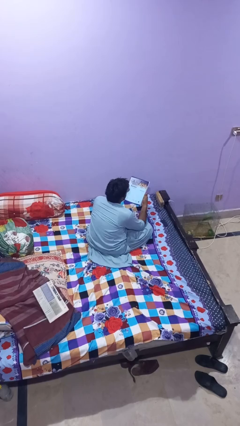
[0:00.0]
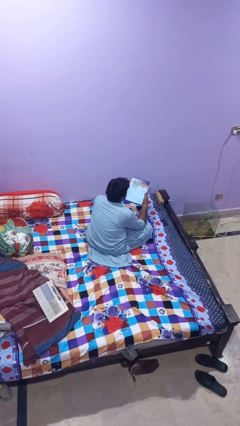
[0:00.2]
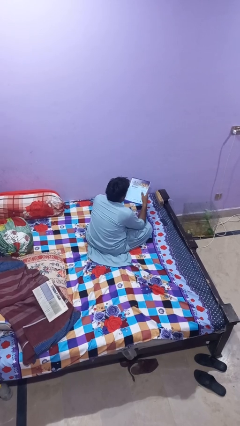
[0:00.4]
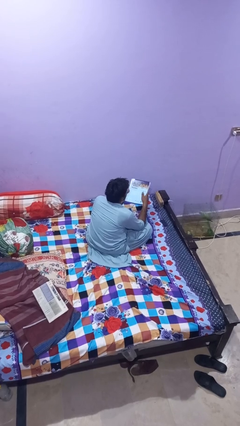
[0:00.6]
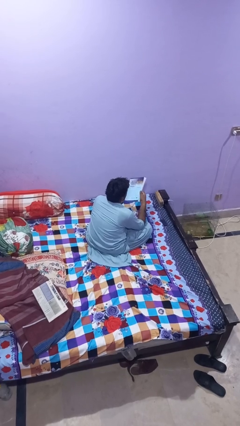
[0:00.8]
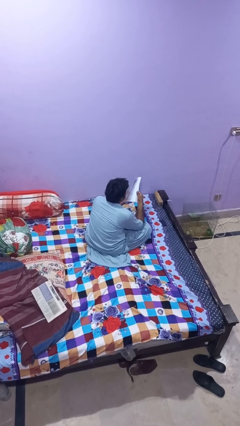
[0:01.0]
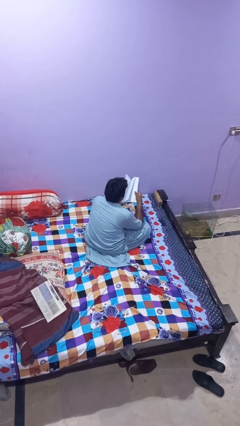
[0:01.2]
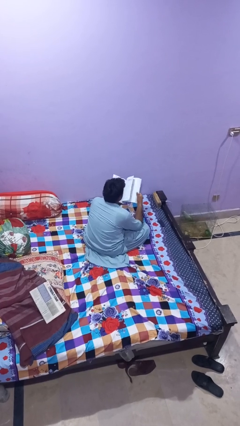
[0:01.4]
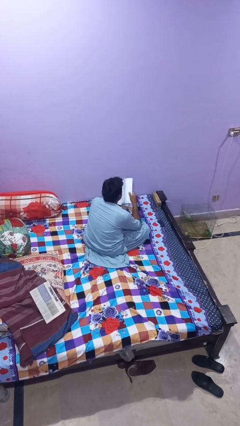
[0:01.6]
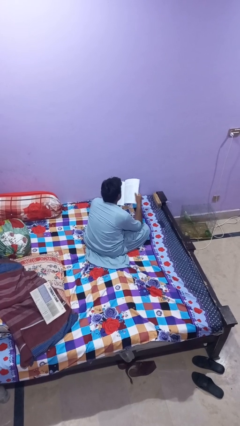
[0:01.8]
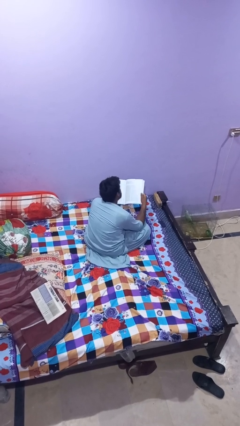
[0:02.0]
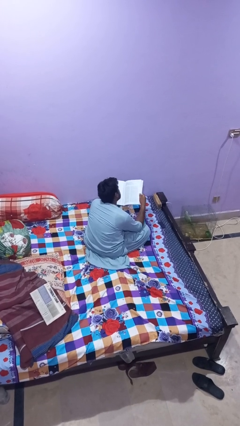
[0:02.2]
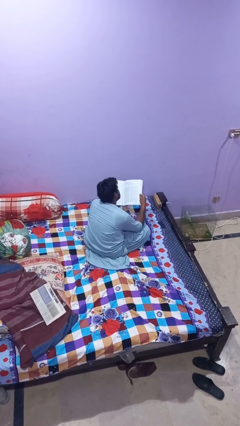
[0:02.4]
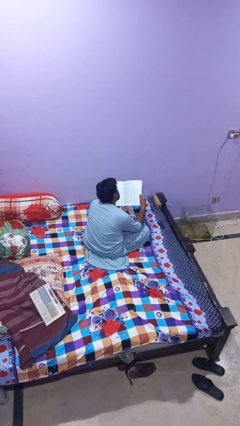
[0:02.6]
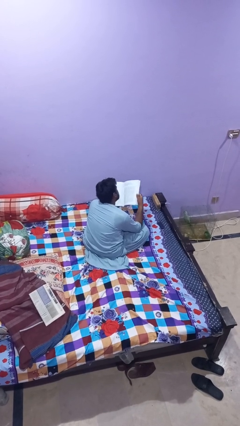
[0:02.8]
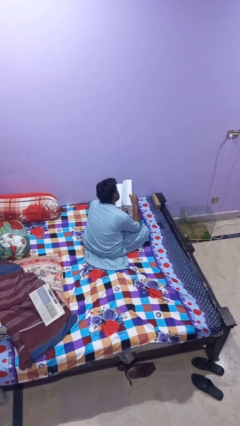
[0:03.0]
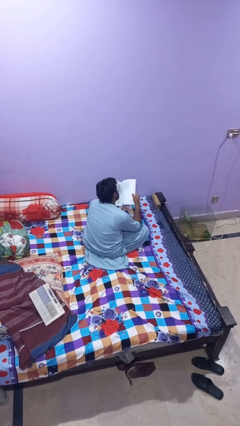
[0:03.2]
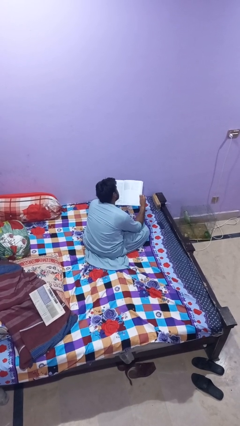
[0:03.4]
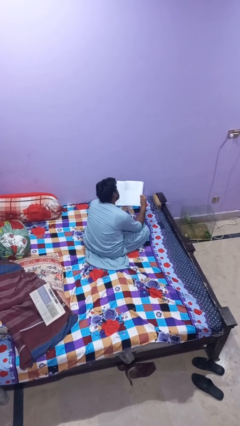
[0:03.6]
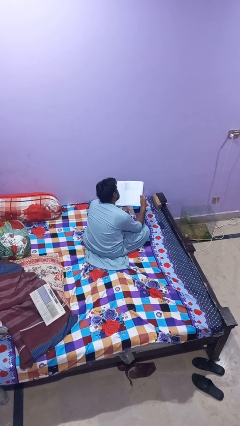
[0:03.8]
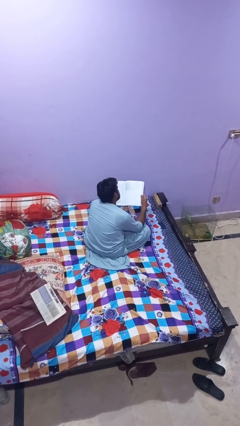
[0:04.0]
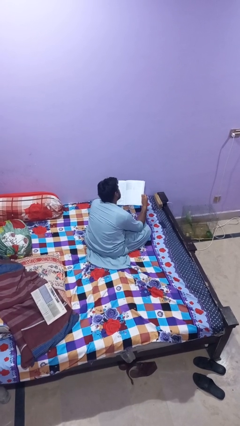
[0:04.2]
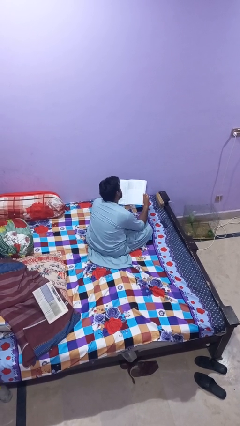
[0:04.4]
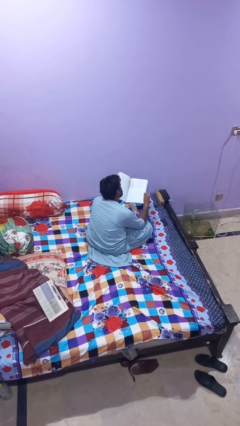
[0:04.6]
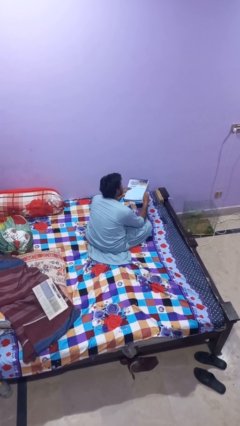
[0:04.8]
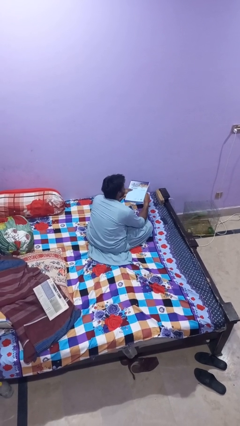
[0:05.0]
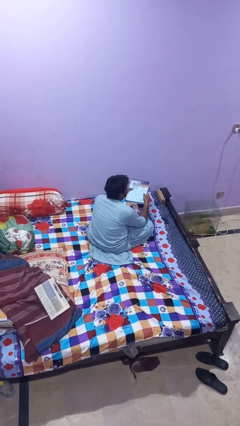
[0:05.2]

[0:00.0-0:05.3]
person reads magazine

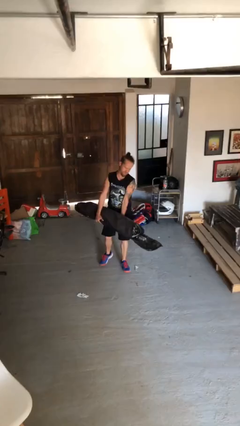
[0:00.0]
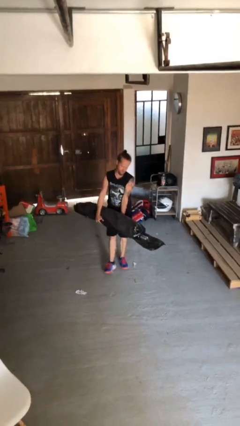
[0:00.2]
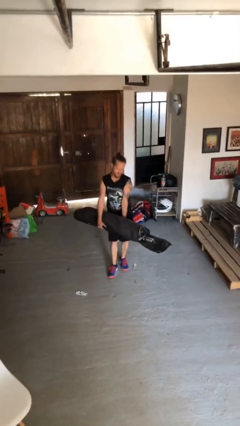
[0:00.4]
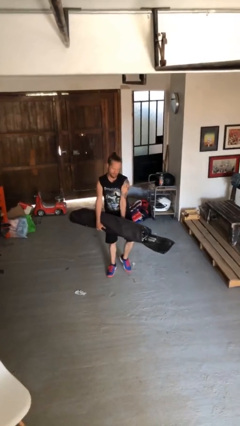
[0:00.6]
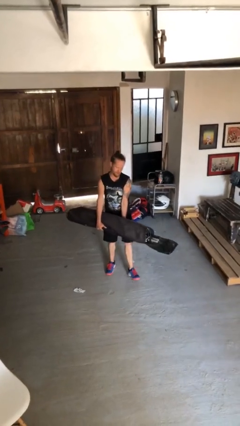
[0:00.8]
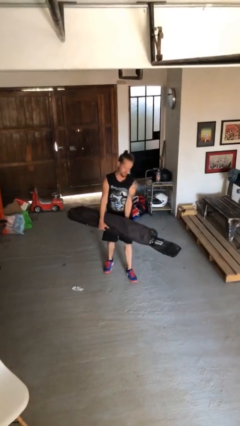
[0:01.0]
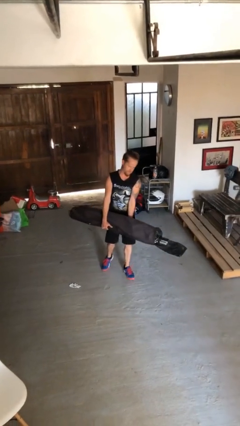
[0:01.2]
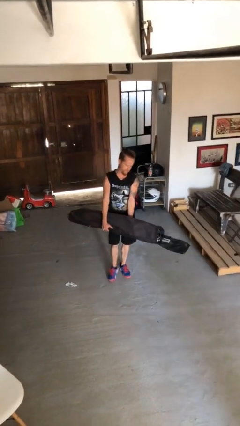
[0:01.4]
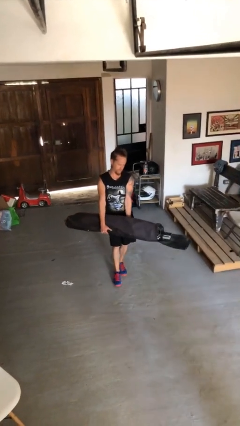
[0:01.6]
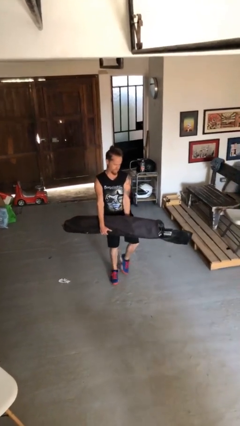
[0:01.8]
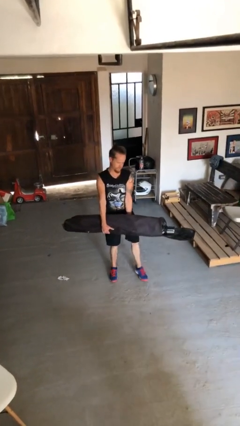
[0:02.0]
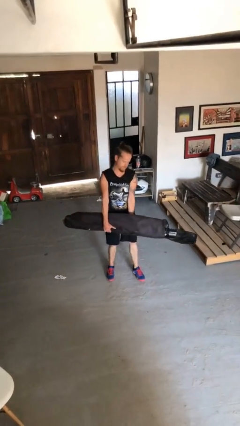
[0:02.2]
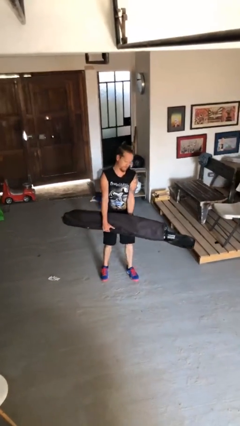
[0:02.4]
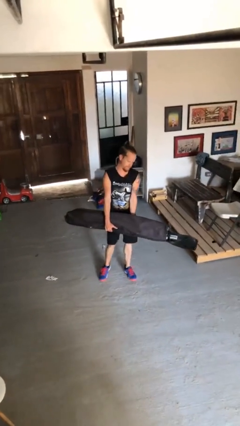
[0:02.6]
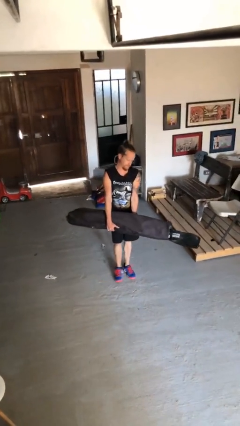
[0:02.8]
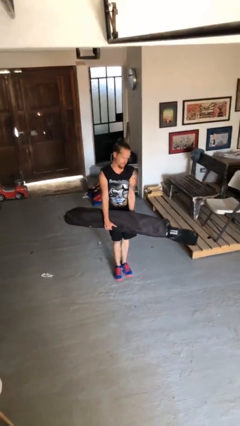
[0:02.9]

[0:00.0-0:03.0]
person carries heavy object

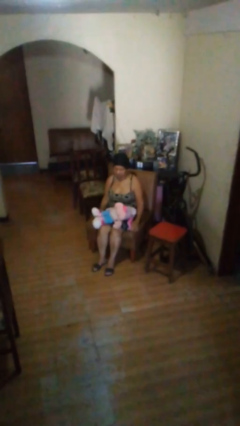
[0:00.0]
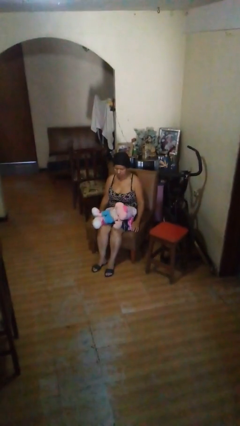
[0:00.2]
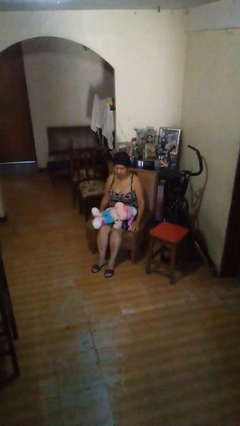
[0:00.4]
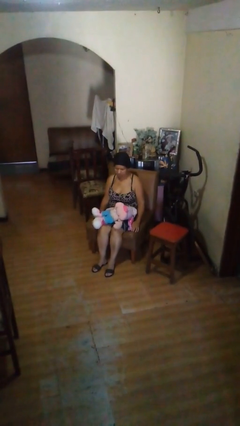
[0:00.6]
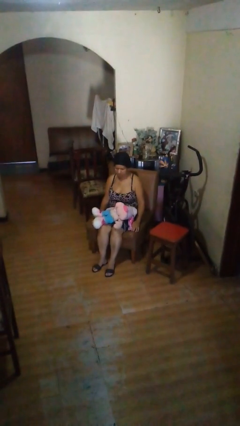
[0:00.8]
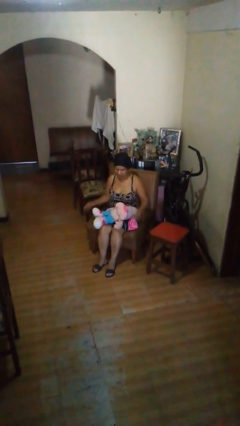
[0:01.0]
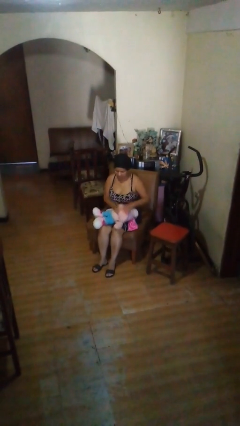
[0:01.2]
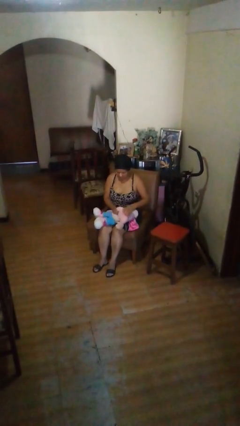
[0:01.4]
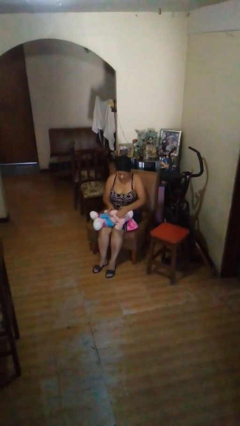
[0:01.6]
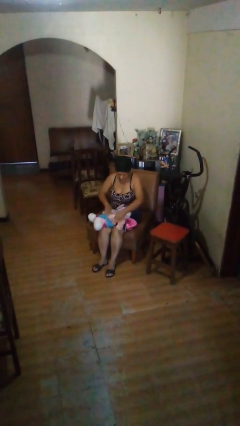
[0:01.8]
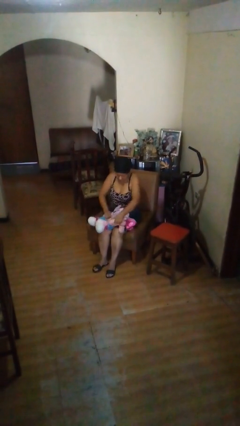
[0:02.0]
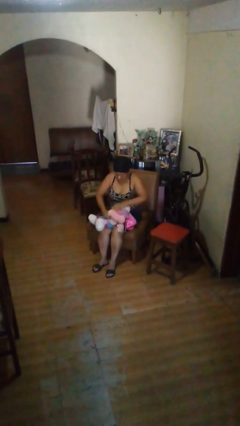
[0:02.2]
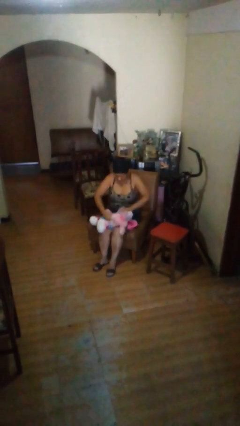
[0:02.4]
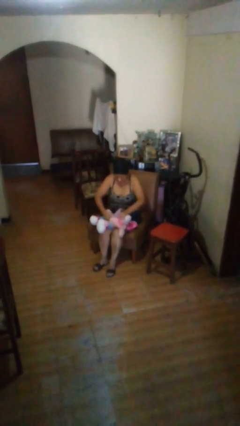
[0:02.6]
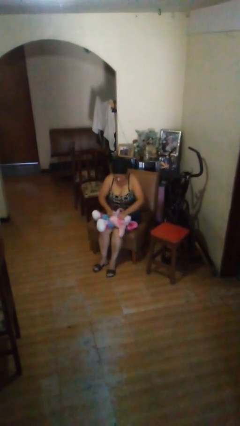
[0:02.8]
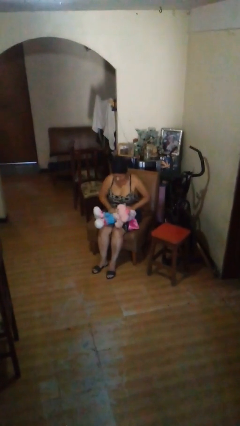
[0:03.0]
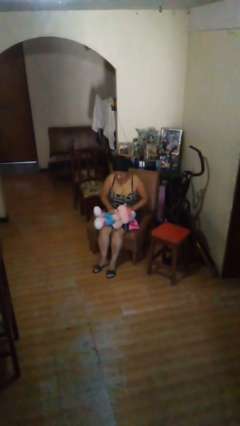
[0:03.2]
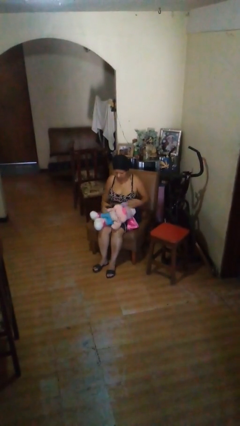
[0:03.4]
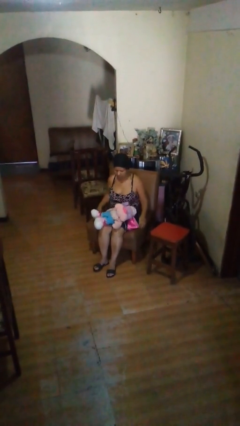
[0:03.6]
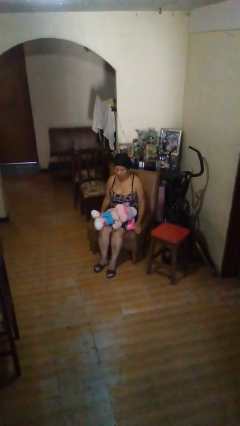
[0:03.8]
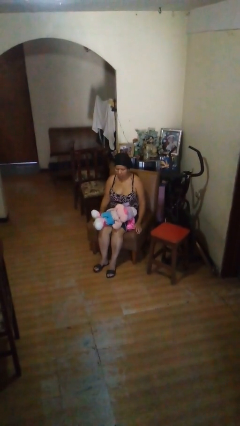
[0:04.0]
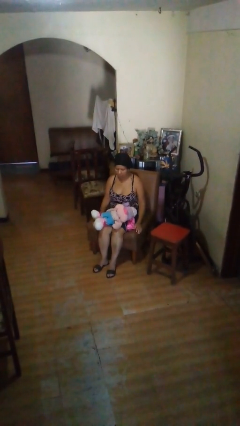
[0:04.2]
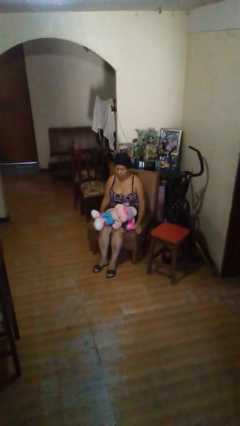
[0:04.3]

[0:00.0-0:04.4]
person squeezes object

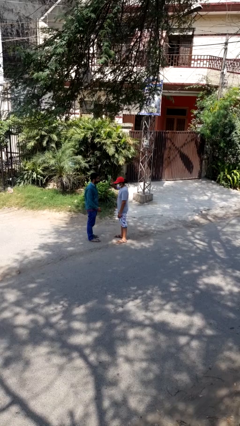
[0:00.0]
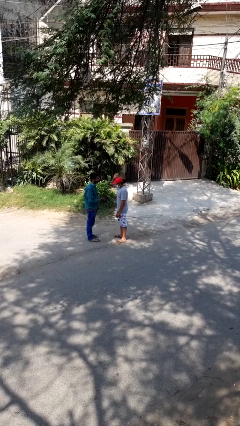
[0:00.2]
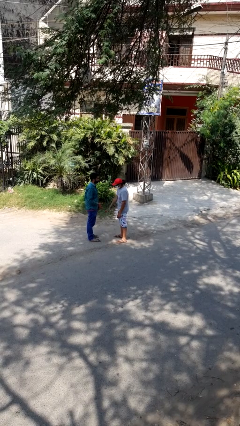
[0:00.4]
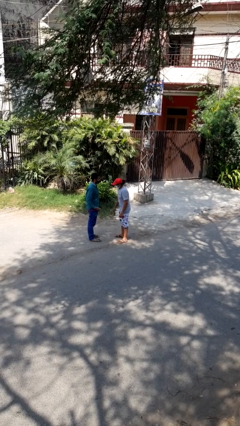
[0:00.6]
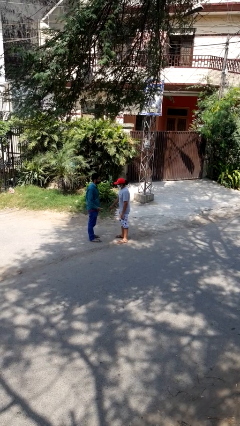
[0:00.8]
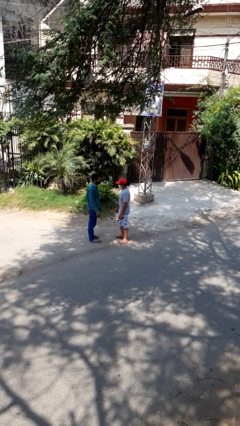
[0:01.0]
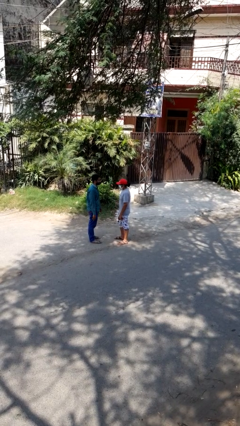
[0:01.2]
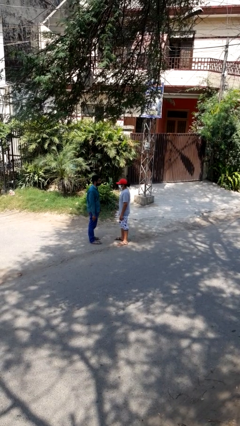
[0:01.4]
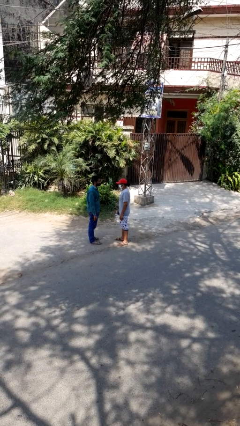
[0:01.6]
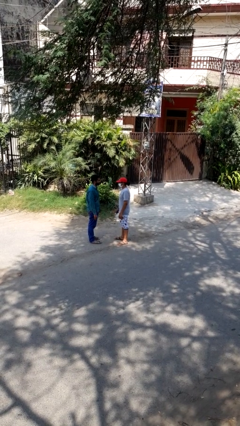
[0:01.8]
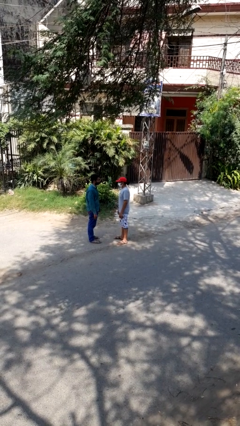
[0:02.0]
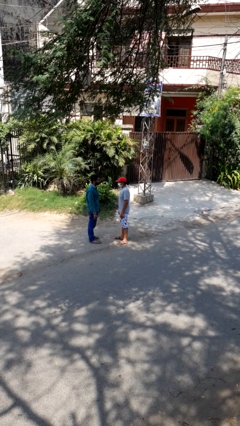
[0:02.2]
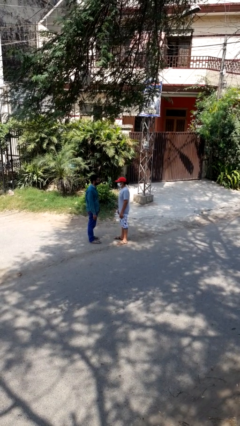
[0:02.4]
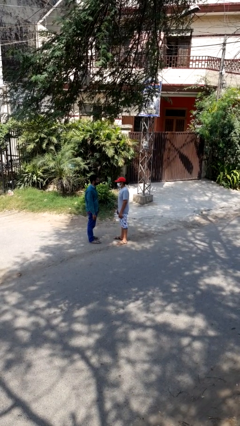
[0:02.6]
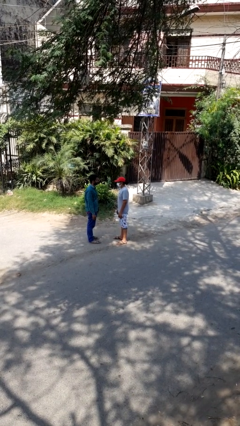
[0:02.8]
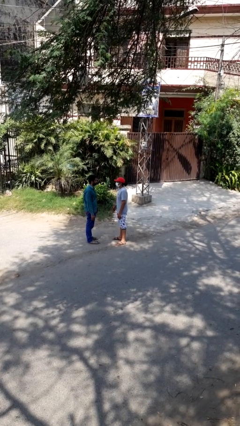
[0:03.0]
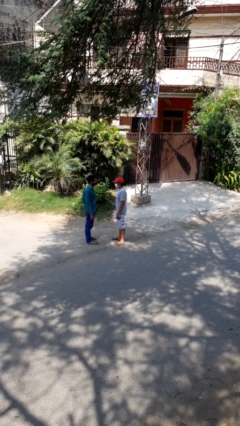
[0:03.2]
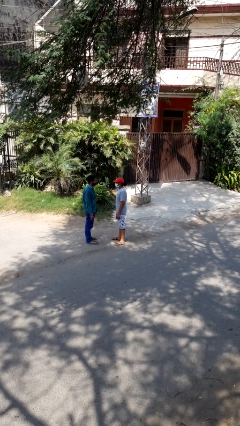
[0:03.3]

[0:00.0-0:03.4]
person highfives hand

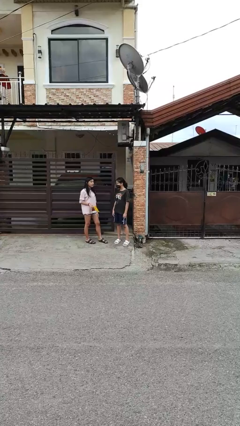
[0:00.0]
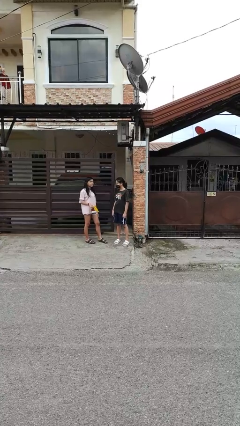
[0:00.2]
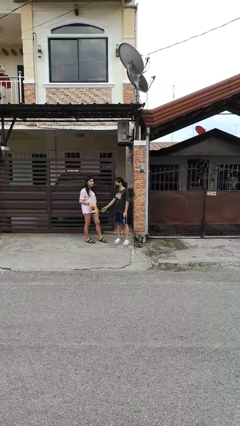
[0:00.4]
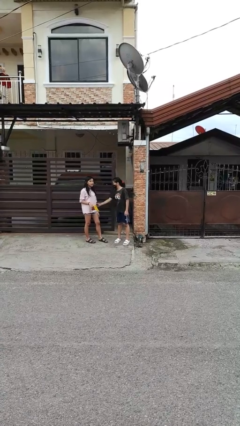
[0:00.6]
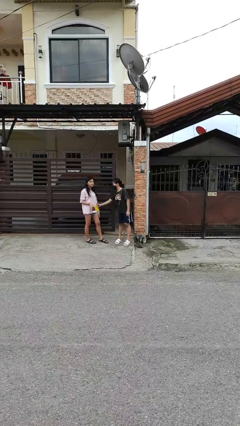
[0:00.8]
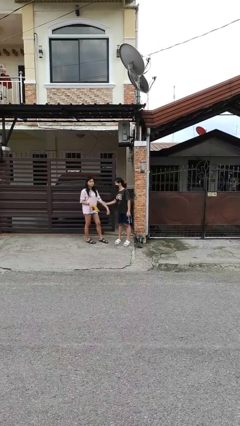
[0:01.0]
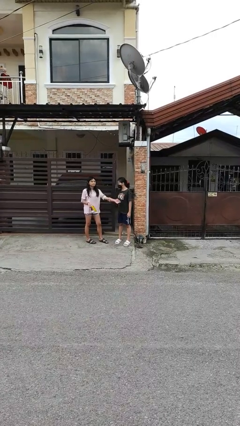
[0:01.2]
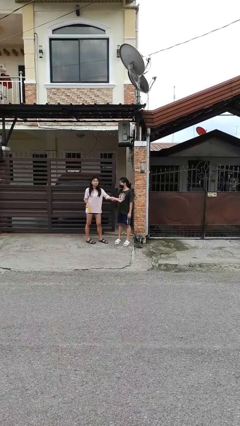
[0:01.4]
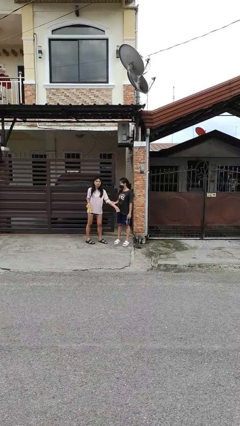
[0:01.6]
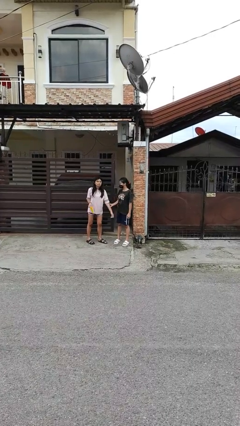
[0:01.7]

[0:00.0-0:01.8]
person grabs person by forearm
